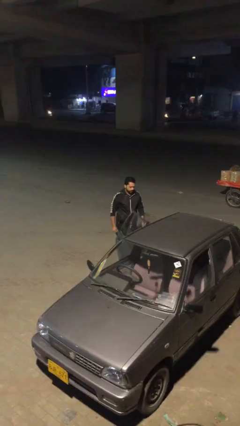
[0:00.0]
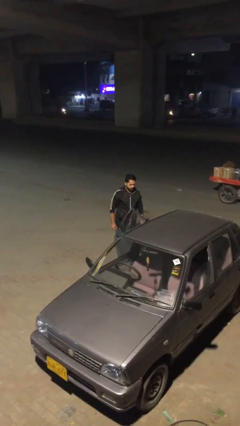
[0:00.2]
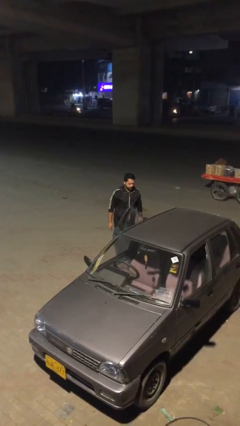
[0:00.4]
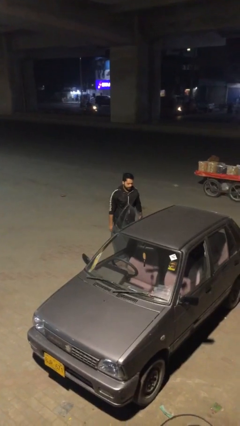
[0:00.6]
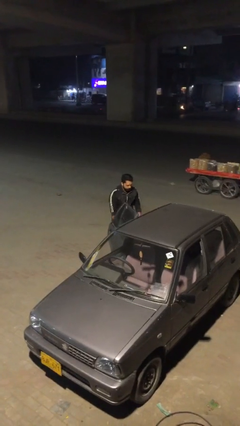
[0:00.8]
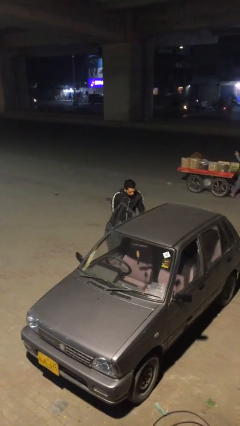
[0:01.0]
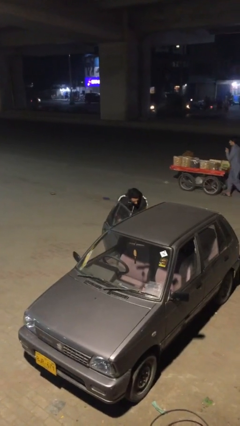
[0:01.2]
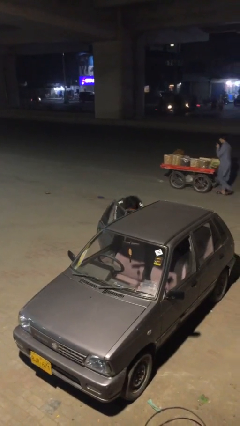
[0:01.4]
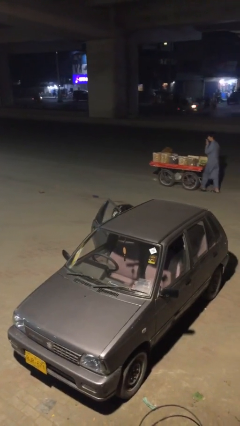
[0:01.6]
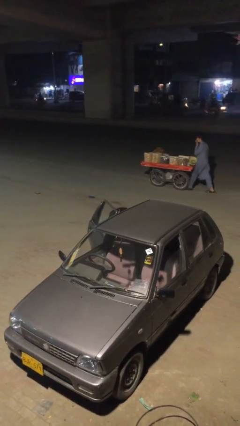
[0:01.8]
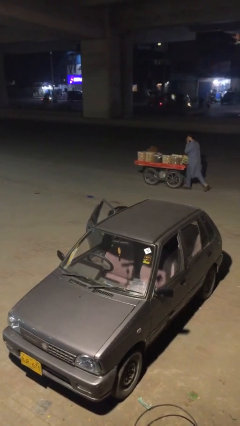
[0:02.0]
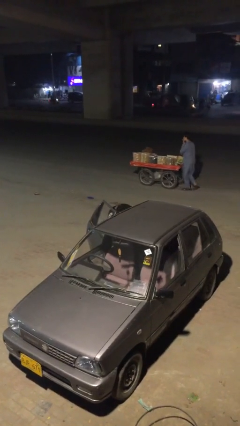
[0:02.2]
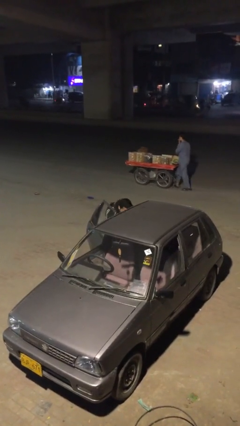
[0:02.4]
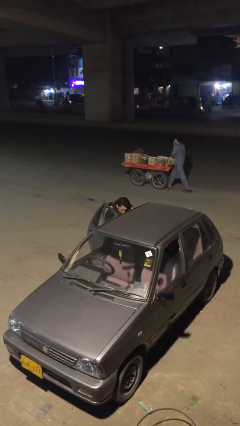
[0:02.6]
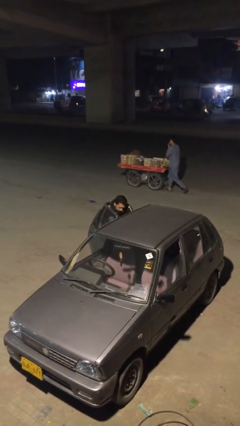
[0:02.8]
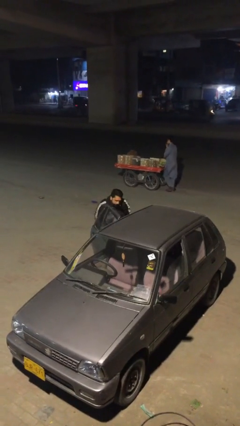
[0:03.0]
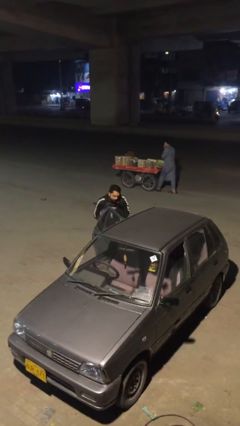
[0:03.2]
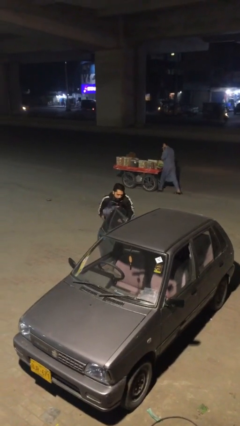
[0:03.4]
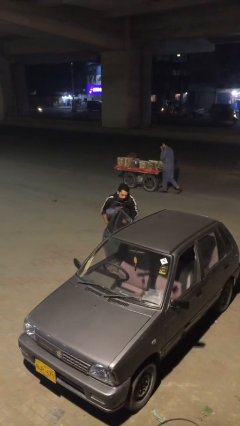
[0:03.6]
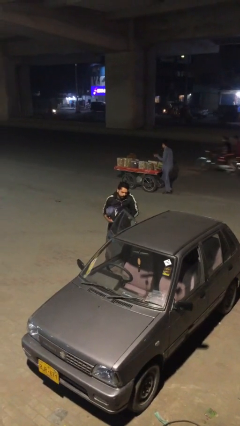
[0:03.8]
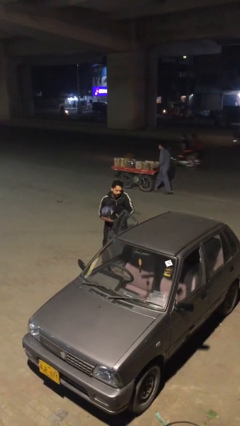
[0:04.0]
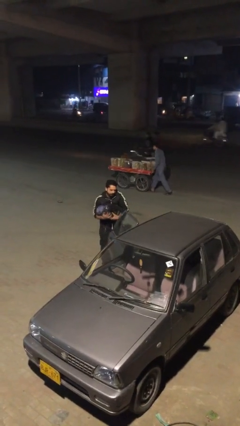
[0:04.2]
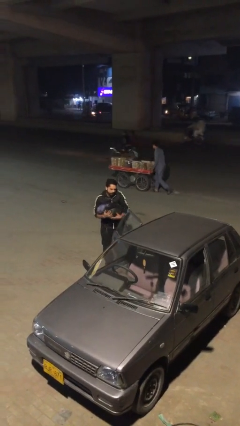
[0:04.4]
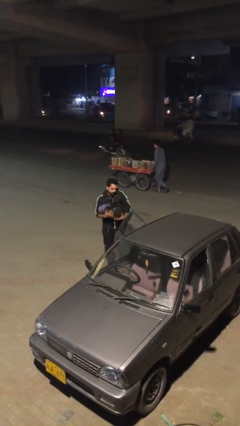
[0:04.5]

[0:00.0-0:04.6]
person unloads car

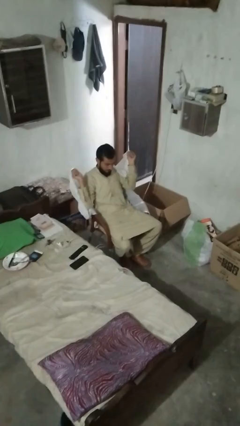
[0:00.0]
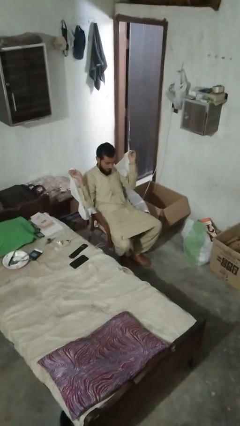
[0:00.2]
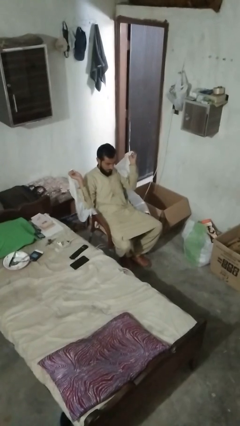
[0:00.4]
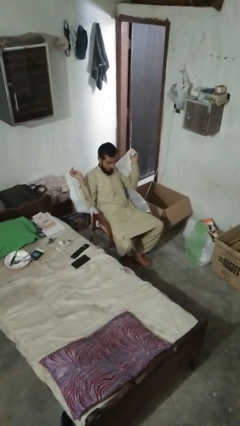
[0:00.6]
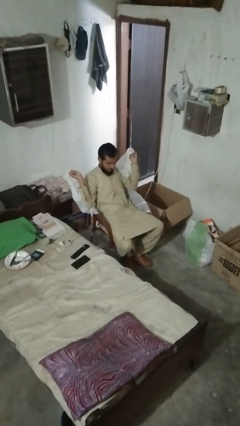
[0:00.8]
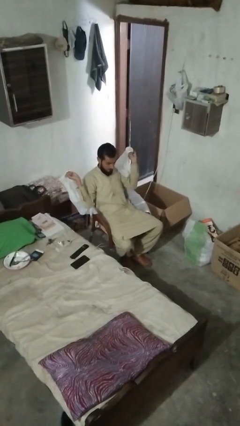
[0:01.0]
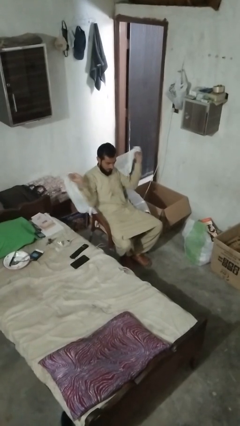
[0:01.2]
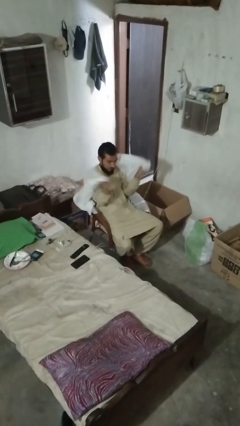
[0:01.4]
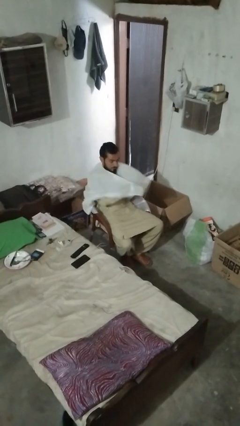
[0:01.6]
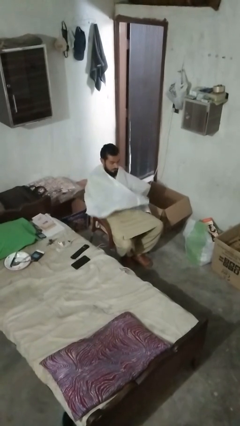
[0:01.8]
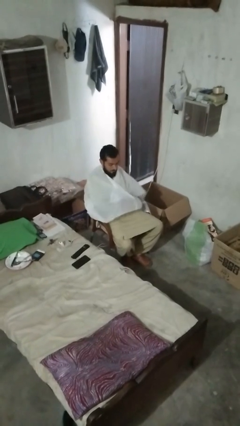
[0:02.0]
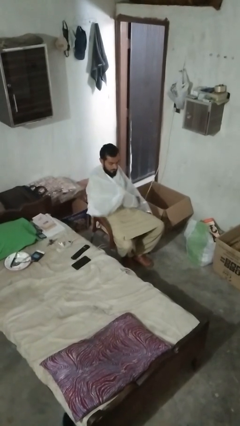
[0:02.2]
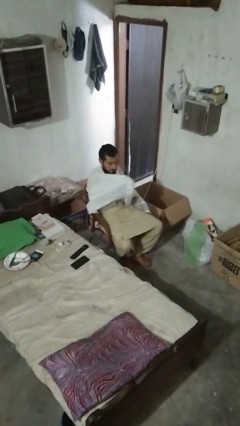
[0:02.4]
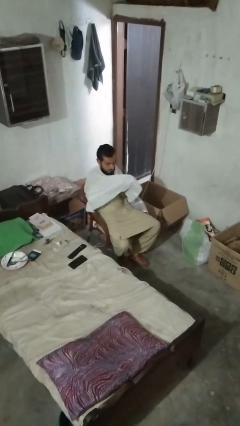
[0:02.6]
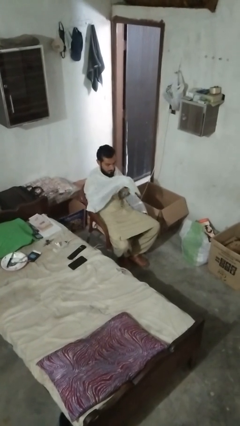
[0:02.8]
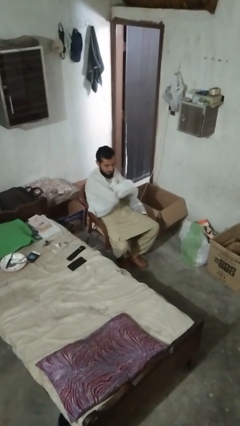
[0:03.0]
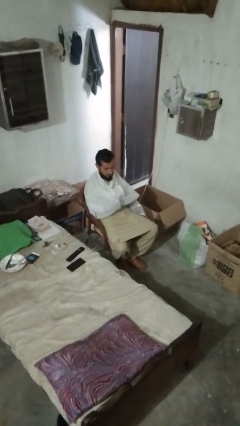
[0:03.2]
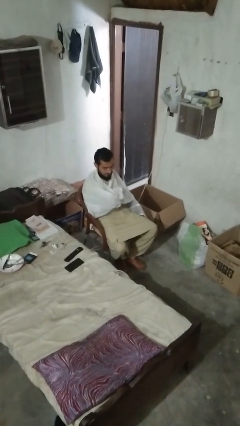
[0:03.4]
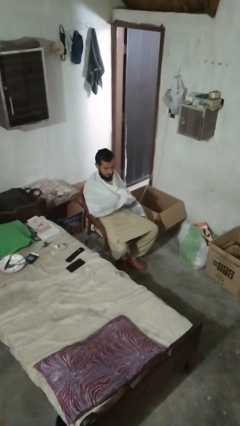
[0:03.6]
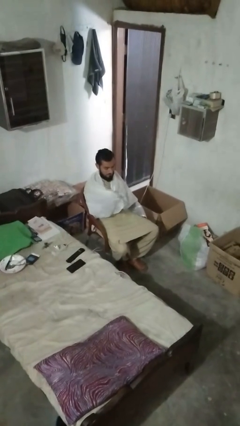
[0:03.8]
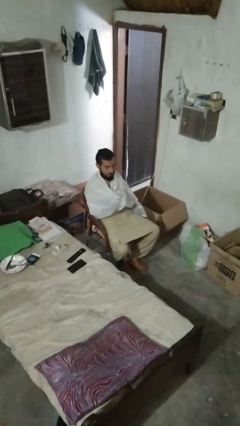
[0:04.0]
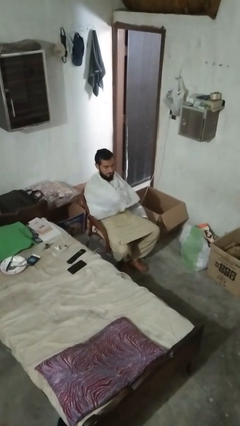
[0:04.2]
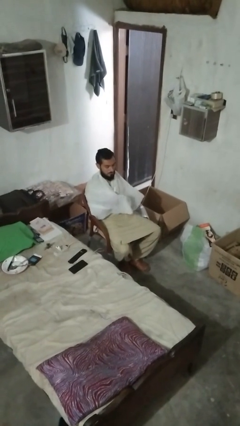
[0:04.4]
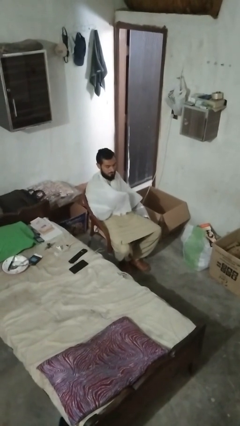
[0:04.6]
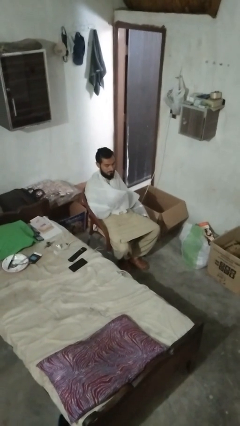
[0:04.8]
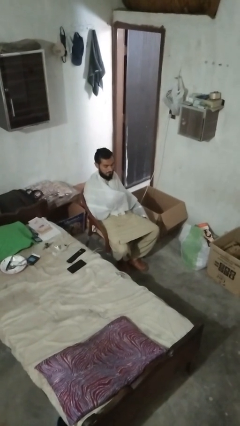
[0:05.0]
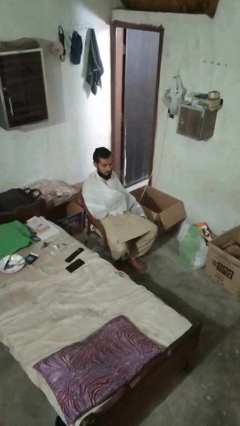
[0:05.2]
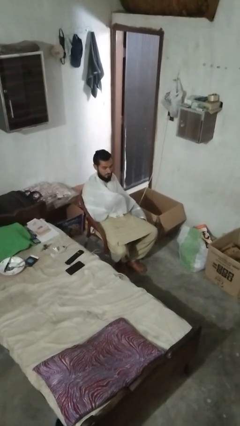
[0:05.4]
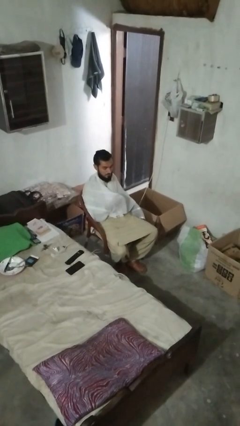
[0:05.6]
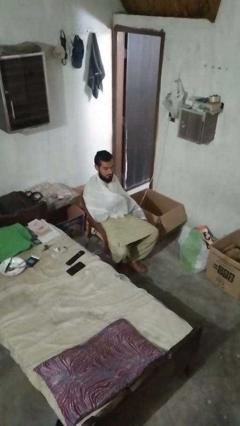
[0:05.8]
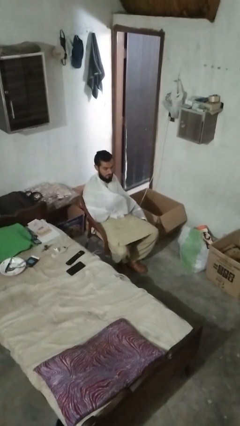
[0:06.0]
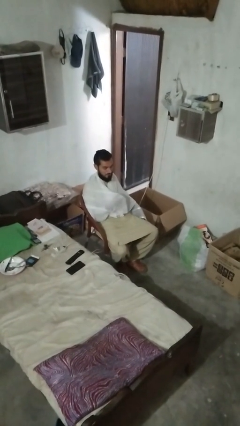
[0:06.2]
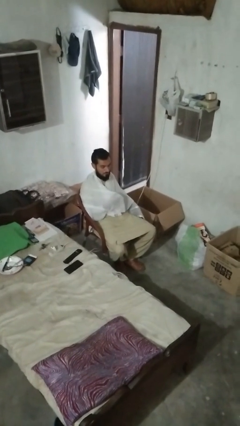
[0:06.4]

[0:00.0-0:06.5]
person covers with blanket

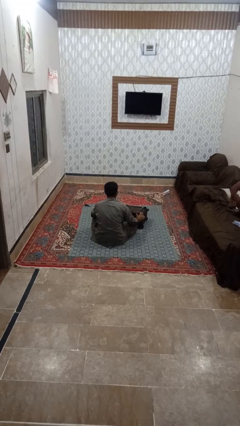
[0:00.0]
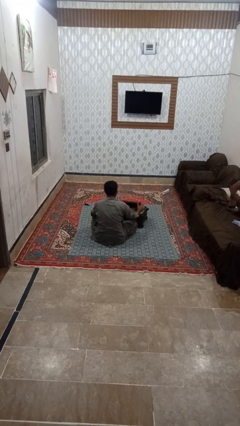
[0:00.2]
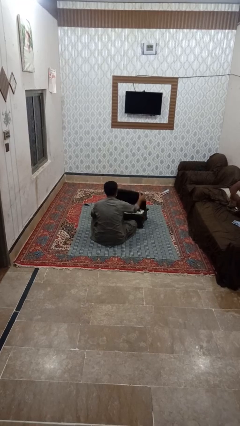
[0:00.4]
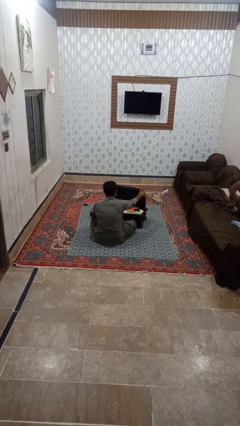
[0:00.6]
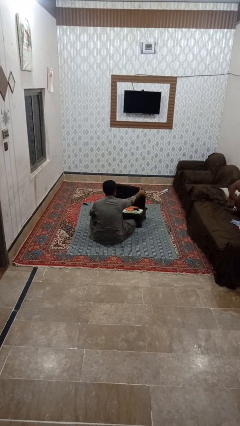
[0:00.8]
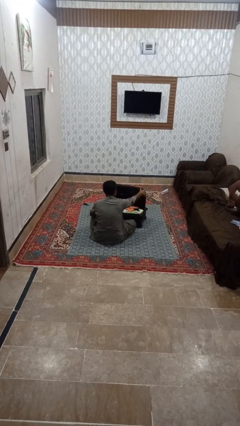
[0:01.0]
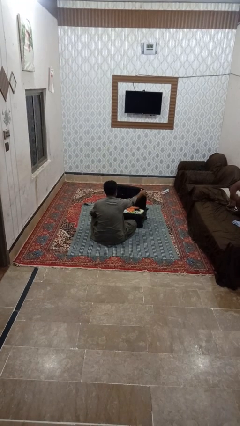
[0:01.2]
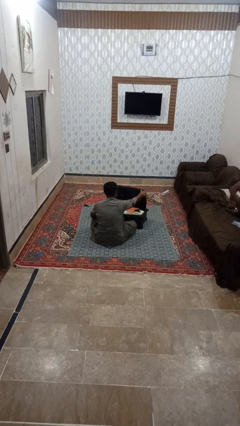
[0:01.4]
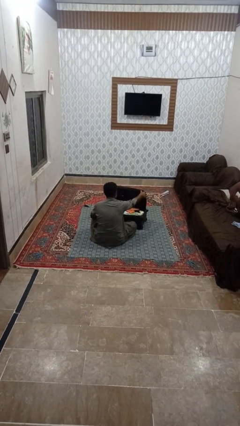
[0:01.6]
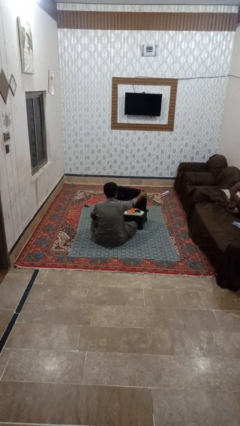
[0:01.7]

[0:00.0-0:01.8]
person opens suitcase

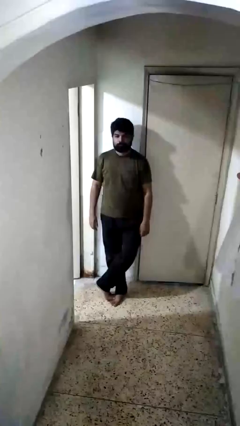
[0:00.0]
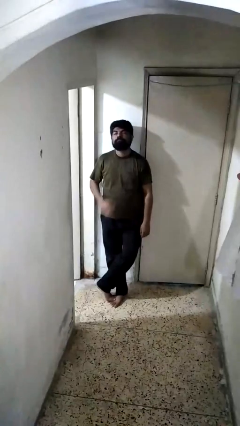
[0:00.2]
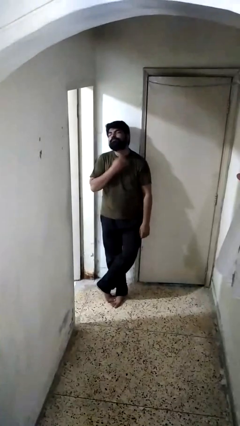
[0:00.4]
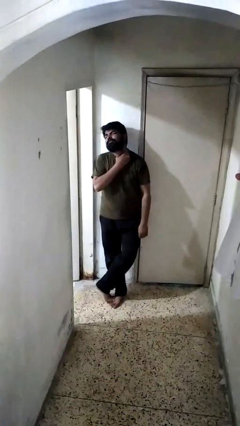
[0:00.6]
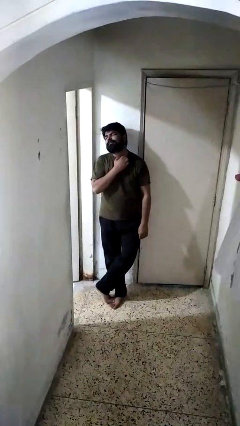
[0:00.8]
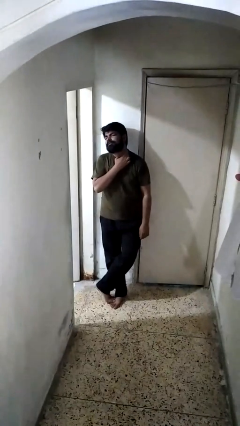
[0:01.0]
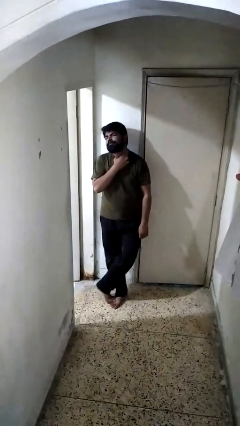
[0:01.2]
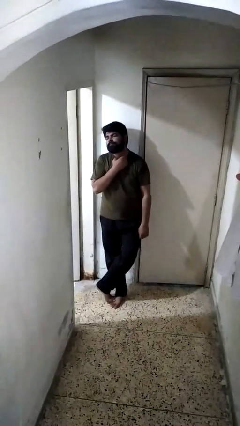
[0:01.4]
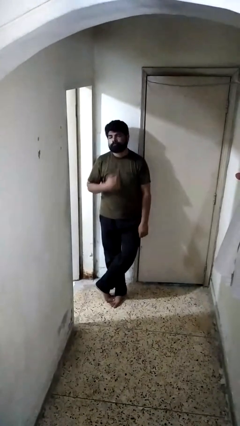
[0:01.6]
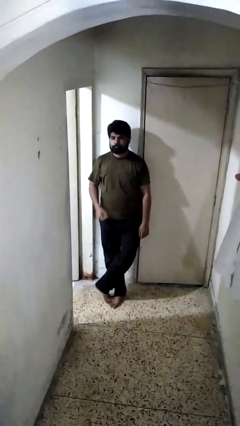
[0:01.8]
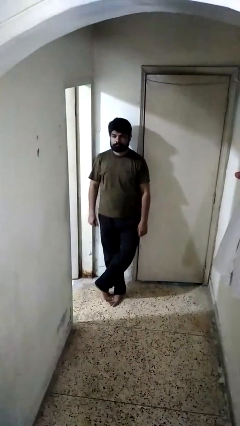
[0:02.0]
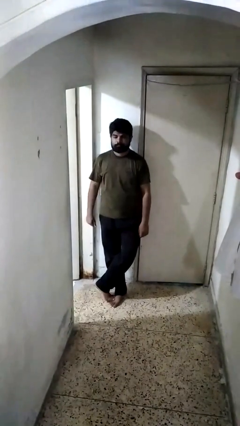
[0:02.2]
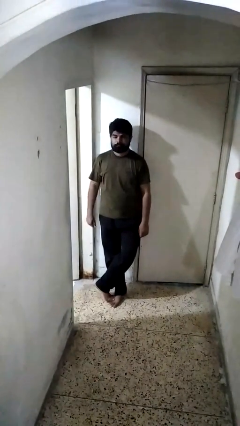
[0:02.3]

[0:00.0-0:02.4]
person rubs neck

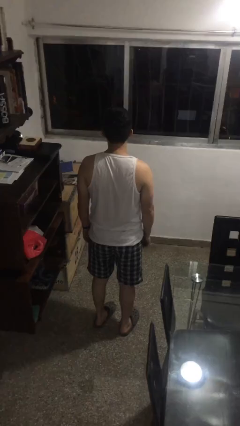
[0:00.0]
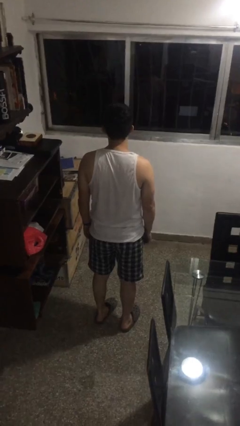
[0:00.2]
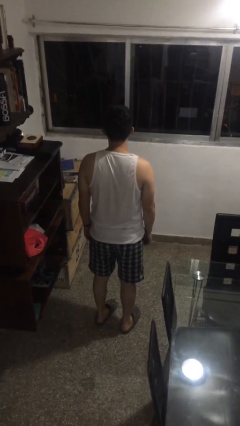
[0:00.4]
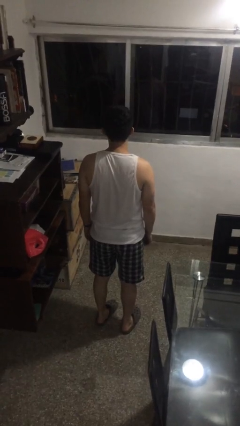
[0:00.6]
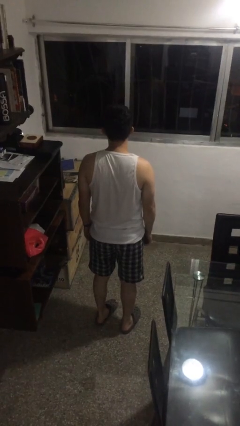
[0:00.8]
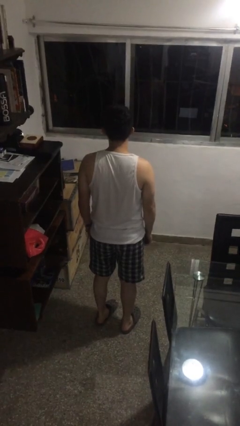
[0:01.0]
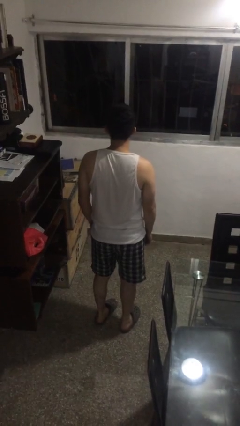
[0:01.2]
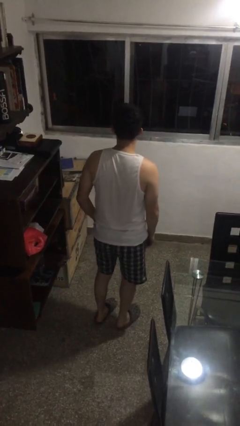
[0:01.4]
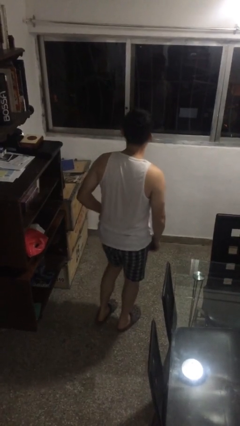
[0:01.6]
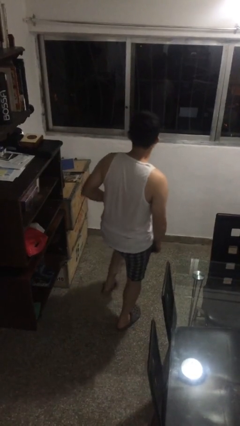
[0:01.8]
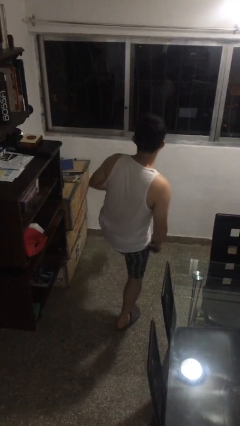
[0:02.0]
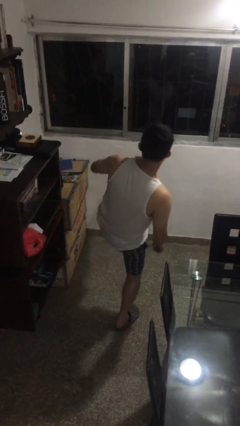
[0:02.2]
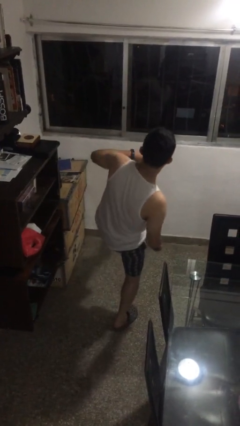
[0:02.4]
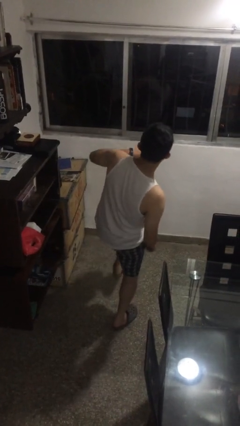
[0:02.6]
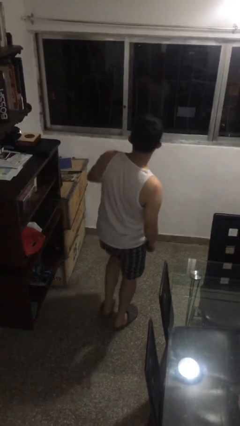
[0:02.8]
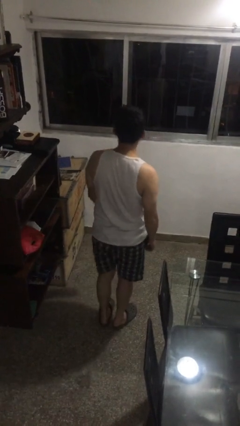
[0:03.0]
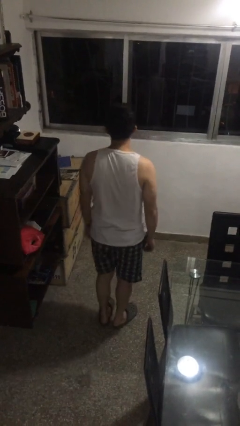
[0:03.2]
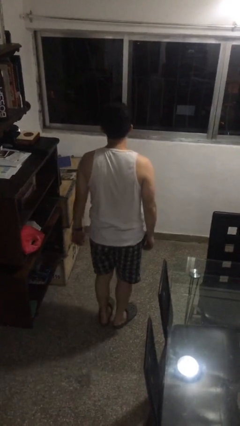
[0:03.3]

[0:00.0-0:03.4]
person karate kicks
